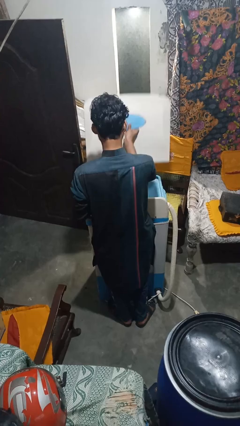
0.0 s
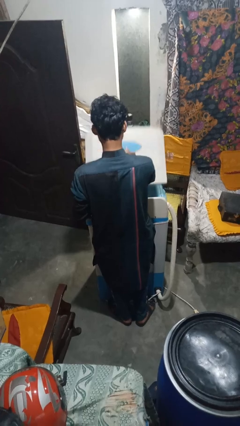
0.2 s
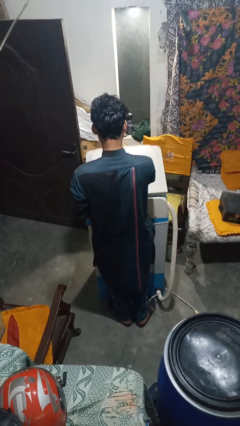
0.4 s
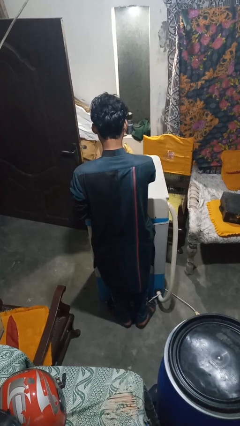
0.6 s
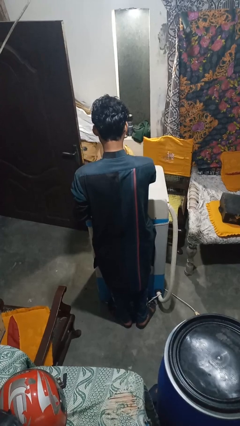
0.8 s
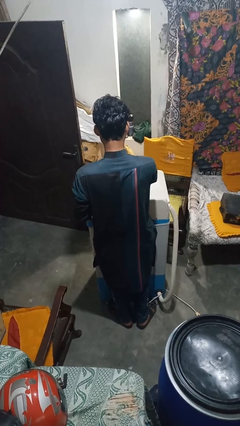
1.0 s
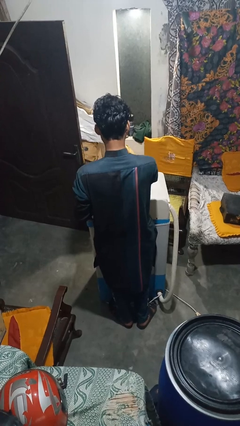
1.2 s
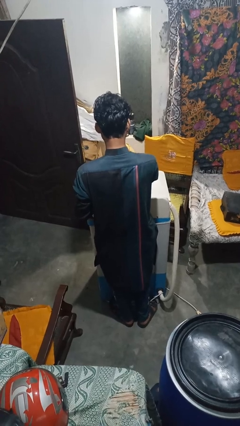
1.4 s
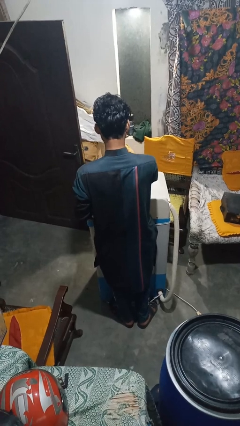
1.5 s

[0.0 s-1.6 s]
person closes clothes washer

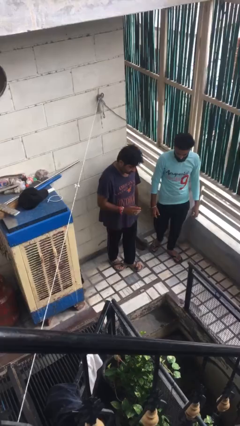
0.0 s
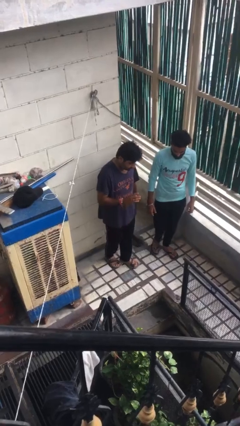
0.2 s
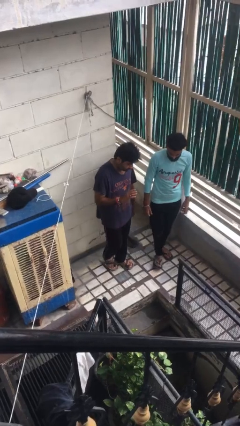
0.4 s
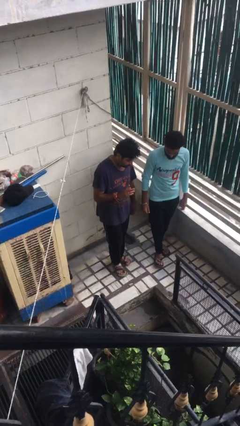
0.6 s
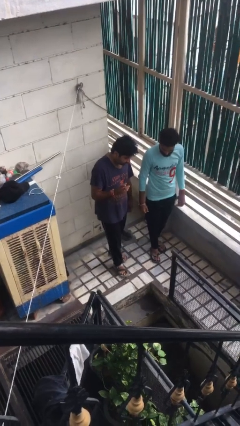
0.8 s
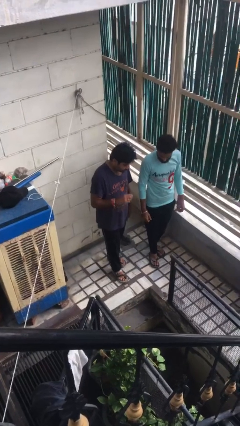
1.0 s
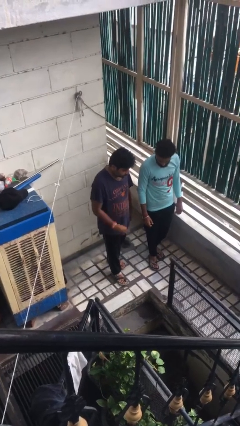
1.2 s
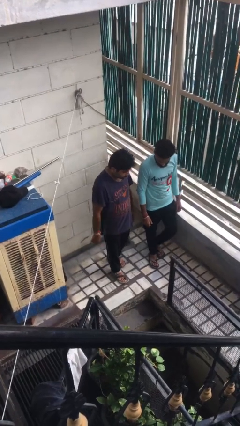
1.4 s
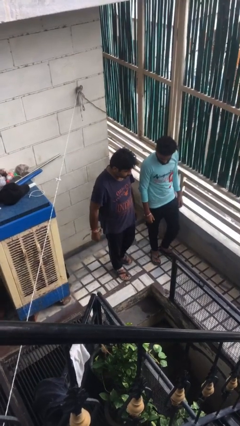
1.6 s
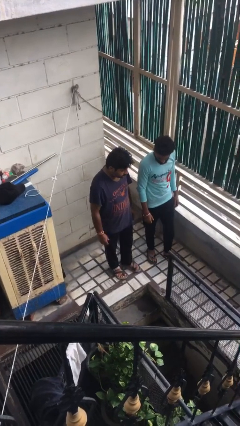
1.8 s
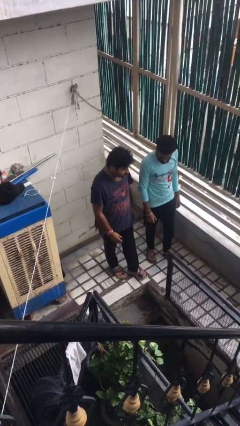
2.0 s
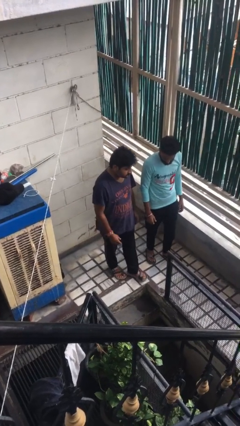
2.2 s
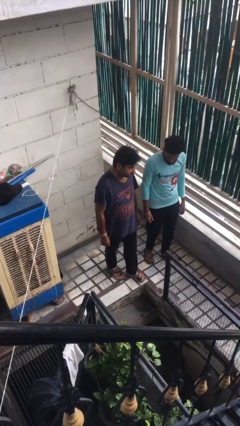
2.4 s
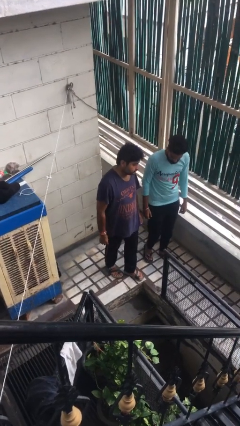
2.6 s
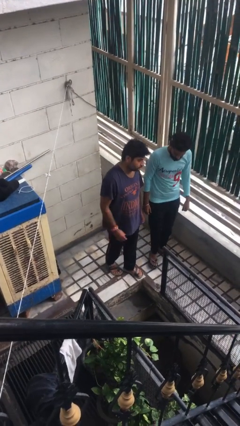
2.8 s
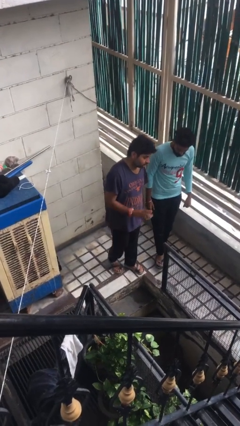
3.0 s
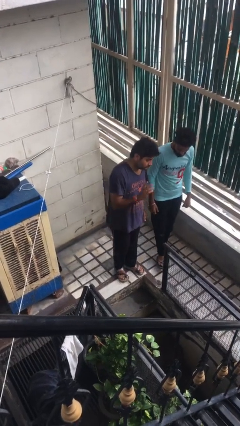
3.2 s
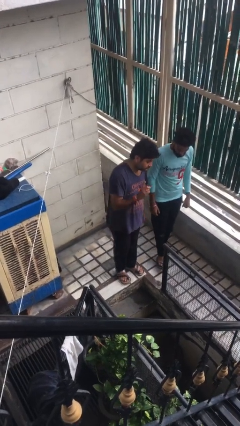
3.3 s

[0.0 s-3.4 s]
person talks to person

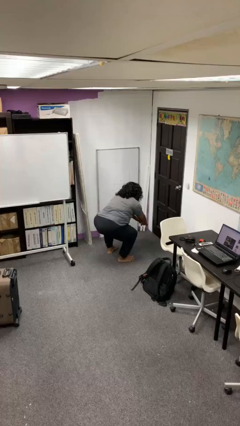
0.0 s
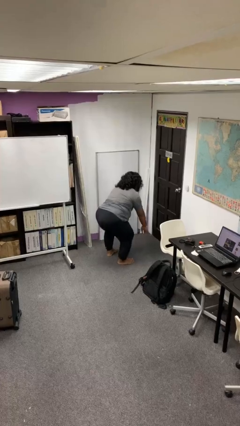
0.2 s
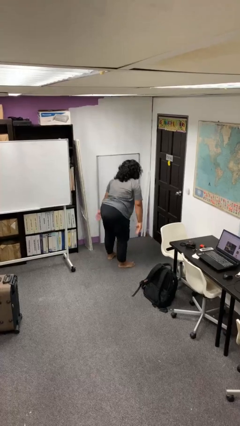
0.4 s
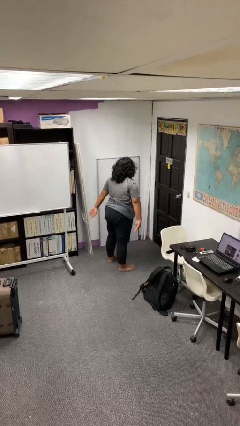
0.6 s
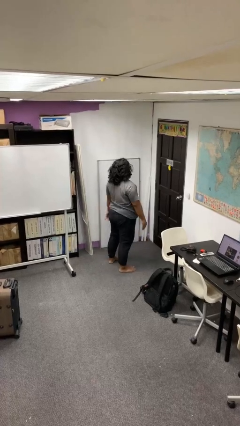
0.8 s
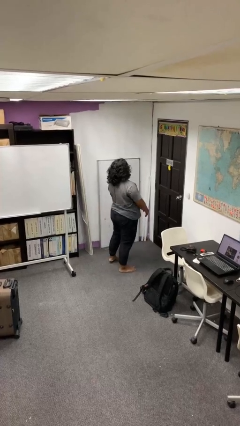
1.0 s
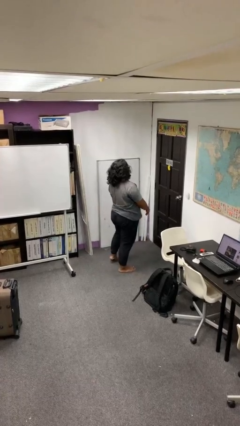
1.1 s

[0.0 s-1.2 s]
person stands up

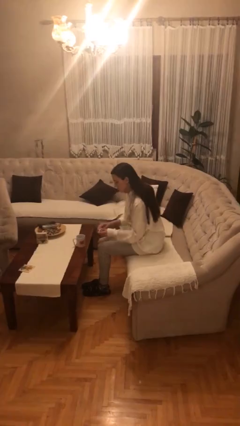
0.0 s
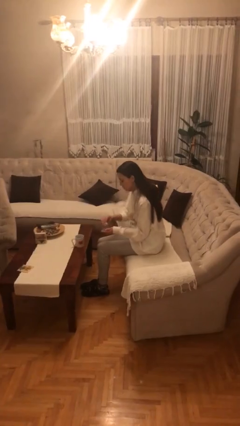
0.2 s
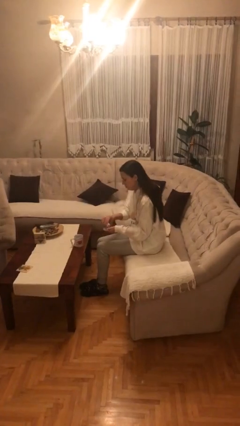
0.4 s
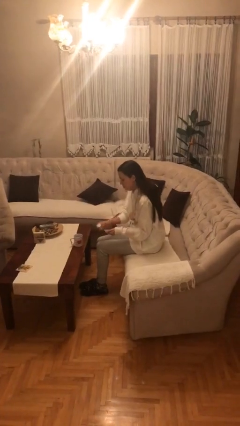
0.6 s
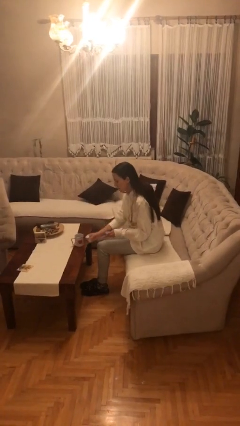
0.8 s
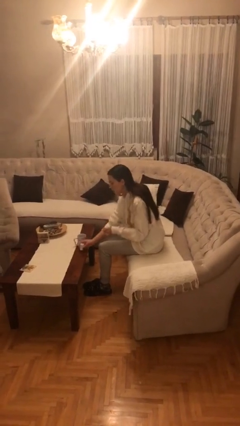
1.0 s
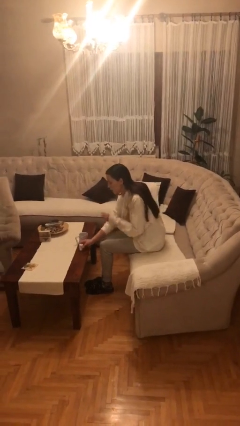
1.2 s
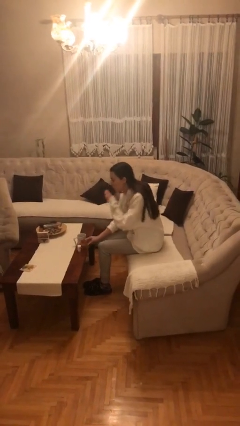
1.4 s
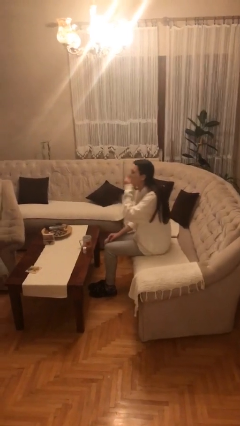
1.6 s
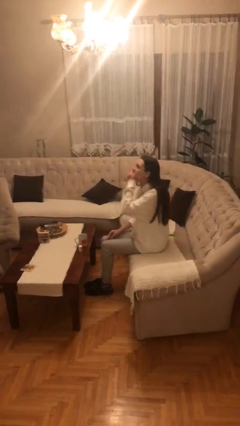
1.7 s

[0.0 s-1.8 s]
person takes medicine pills

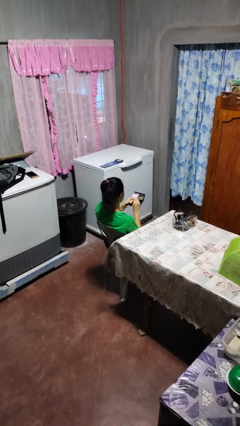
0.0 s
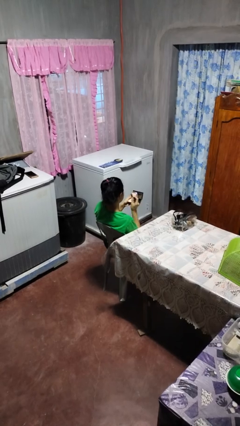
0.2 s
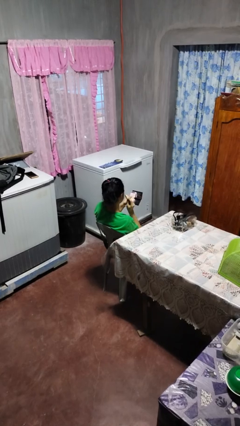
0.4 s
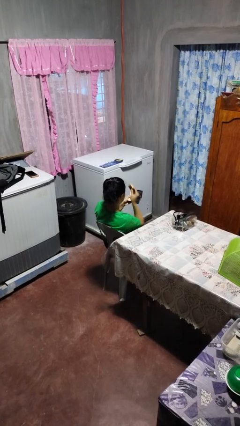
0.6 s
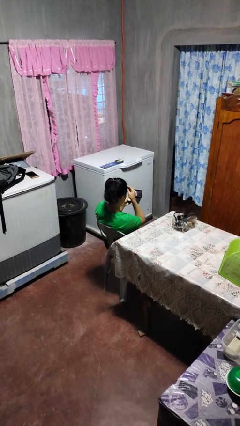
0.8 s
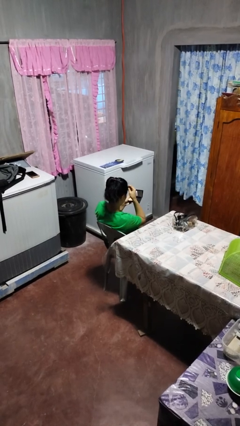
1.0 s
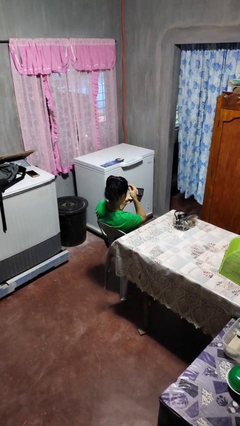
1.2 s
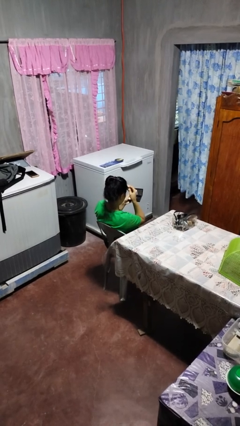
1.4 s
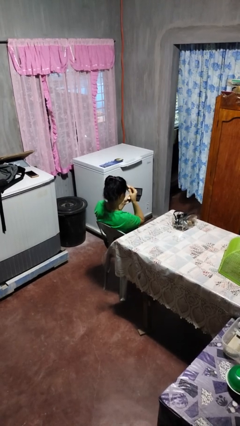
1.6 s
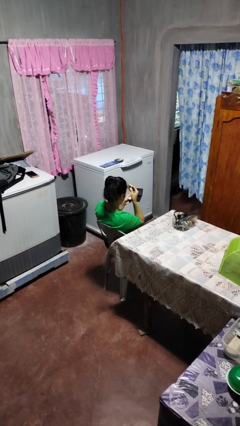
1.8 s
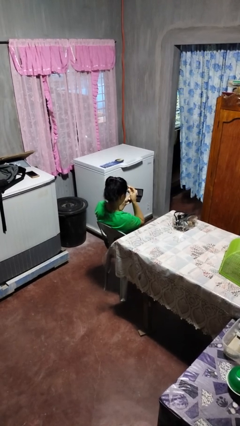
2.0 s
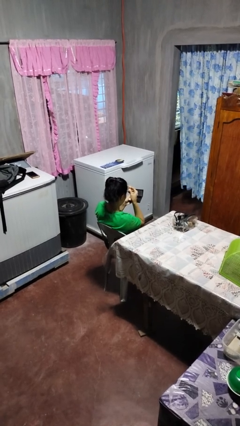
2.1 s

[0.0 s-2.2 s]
person applies foundation makeup

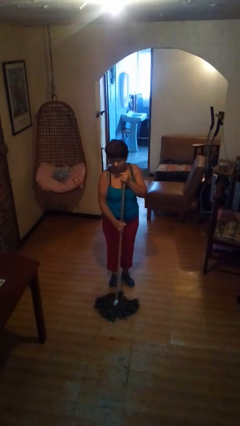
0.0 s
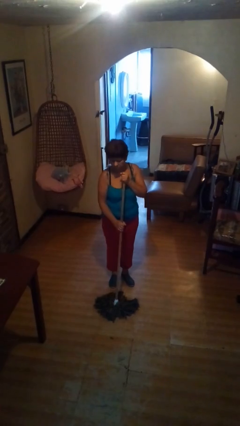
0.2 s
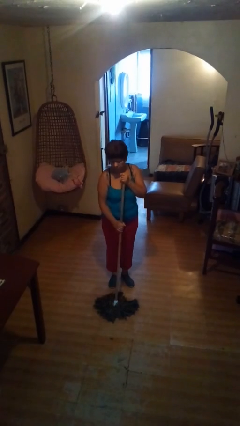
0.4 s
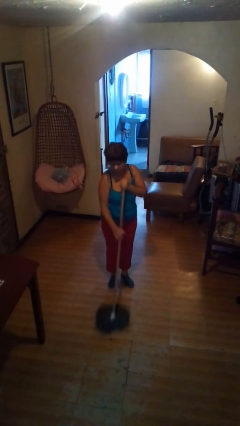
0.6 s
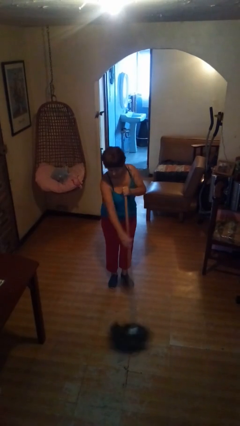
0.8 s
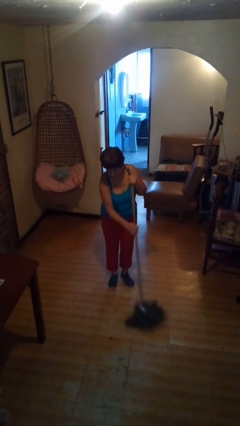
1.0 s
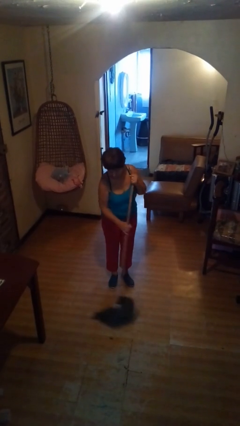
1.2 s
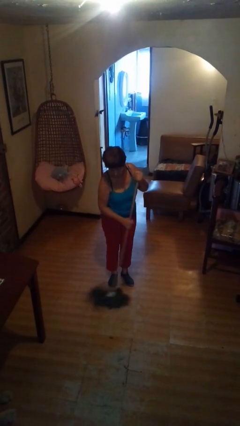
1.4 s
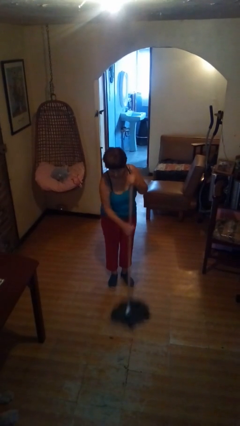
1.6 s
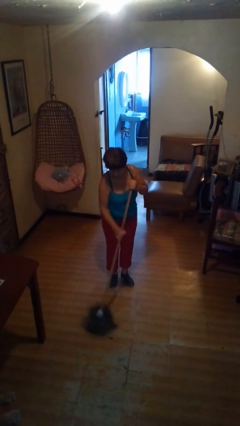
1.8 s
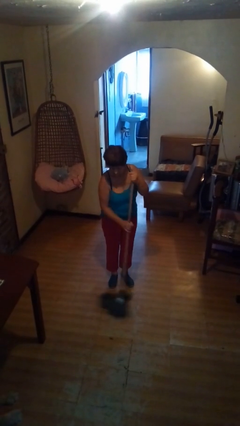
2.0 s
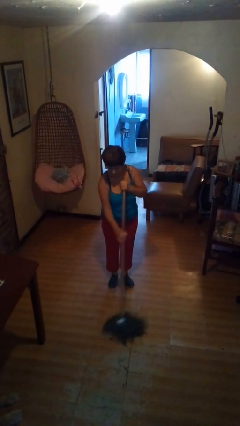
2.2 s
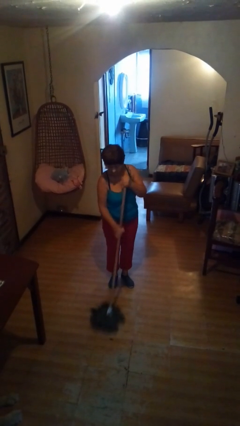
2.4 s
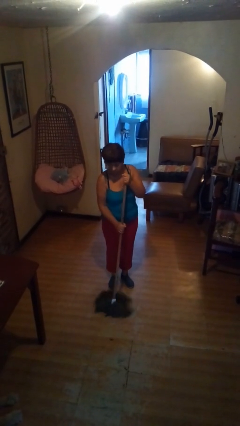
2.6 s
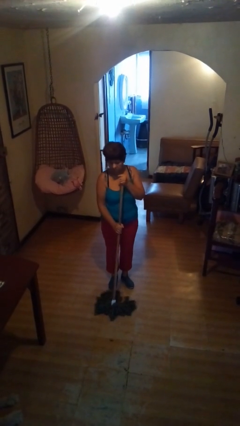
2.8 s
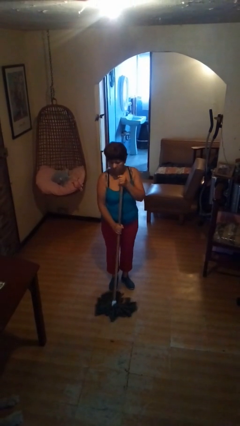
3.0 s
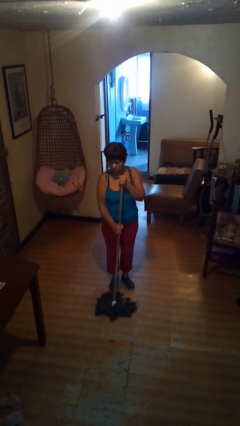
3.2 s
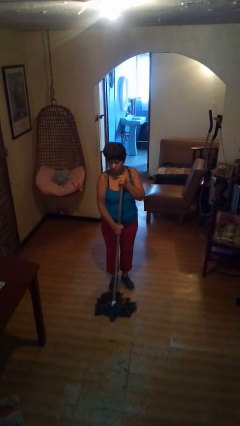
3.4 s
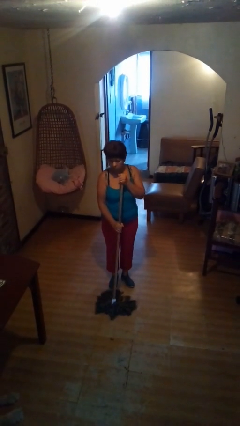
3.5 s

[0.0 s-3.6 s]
person mops

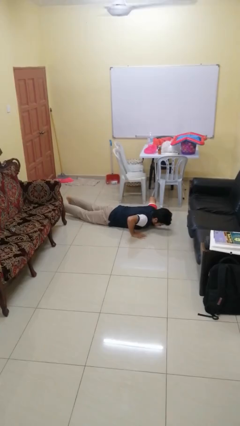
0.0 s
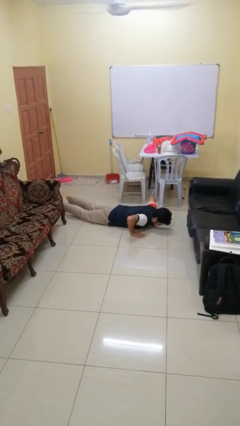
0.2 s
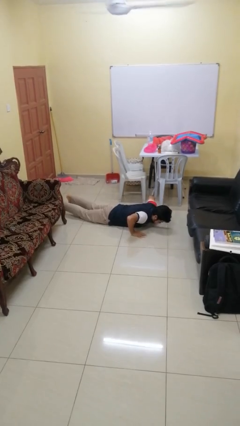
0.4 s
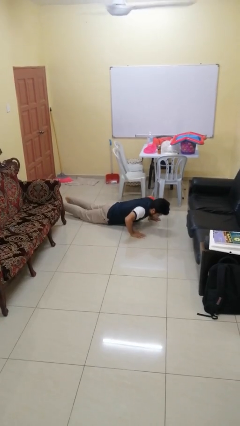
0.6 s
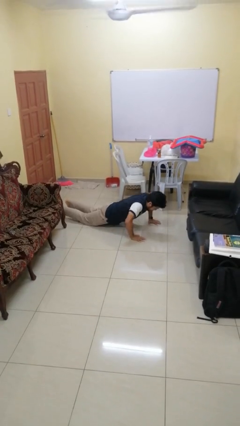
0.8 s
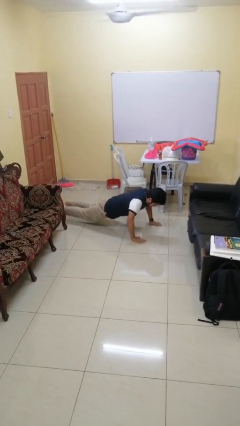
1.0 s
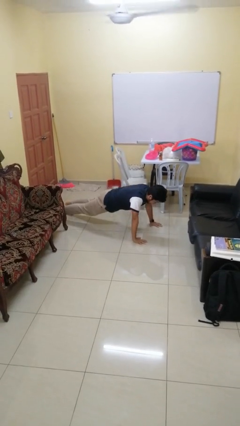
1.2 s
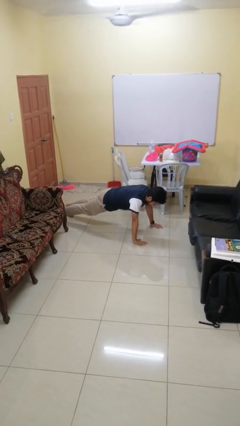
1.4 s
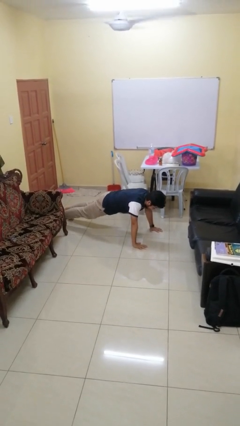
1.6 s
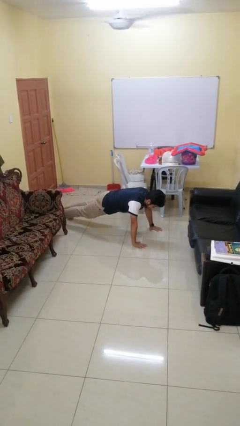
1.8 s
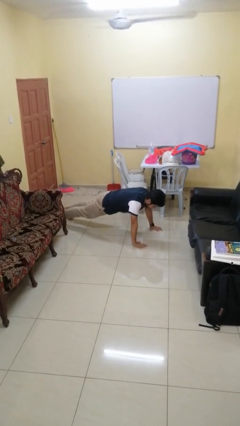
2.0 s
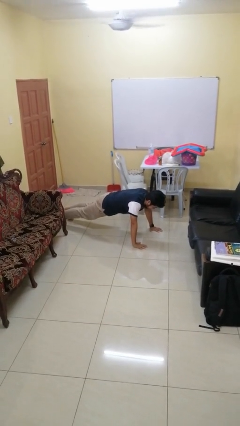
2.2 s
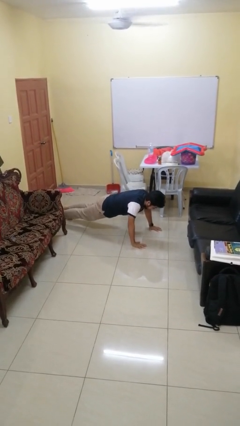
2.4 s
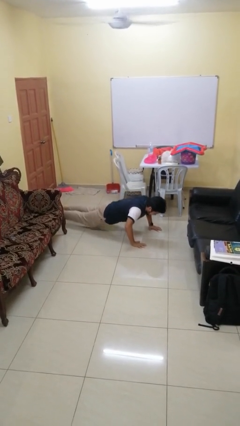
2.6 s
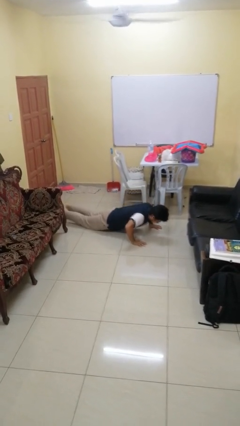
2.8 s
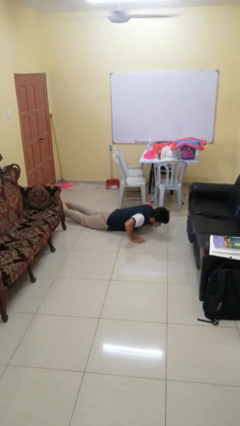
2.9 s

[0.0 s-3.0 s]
person exercises with pushup

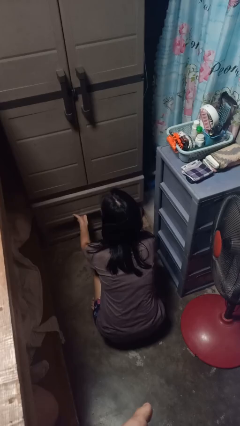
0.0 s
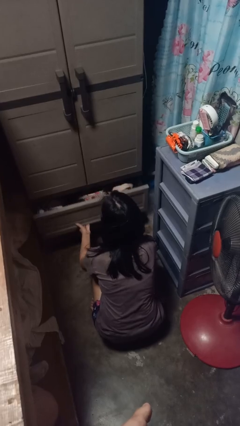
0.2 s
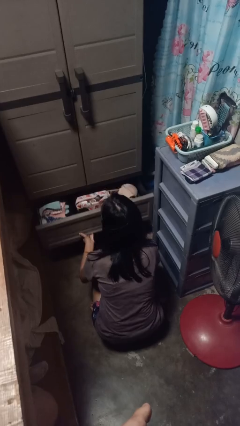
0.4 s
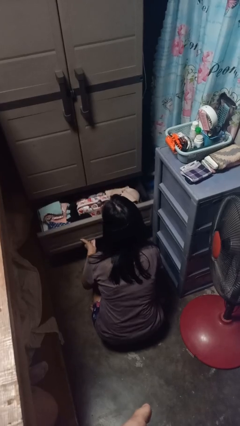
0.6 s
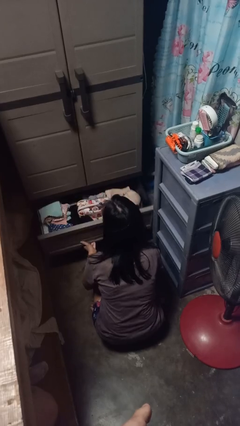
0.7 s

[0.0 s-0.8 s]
person opens dresser drawer
